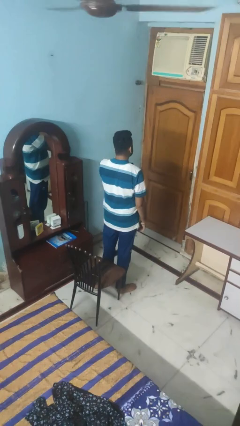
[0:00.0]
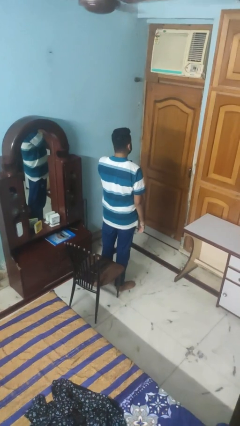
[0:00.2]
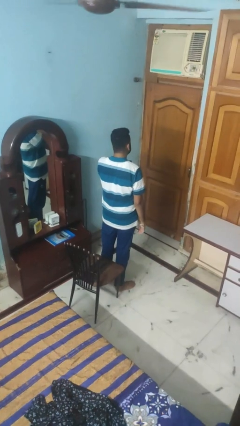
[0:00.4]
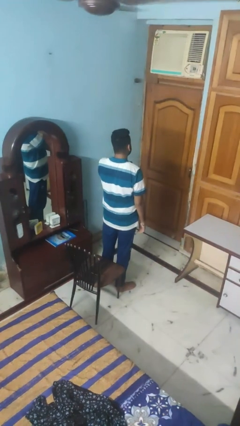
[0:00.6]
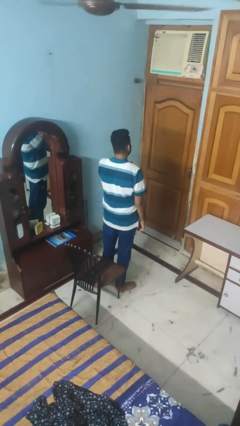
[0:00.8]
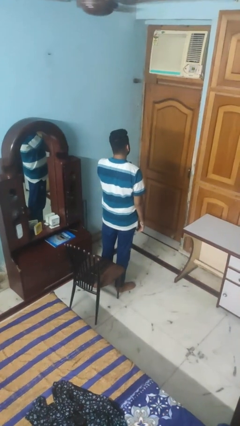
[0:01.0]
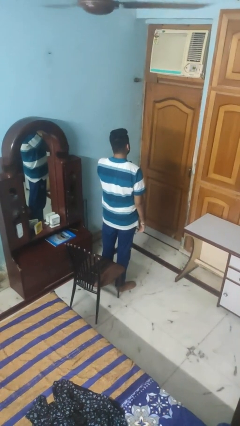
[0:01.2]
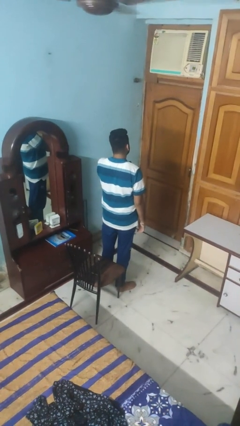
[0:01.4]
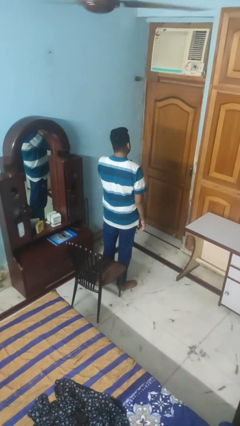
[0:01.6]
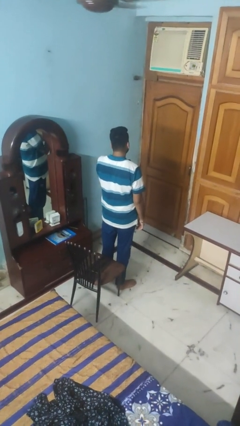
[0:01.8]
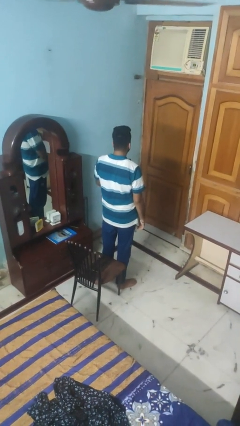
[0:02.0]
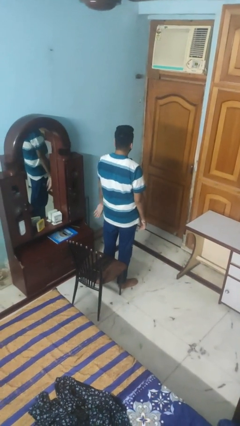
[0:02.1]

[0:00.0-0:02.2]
person rubs eyes

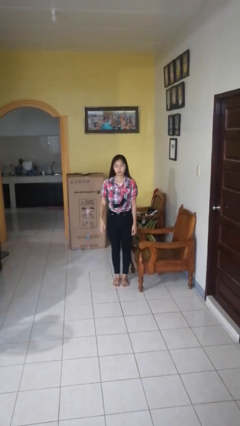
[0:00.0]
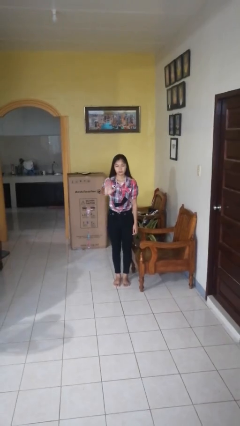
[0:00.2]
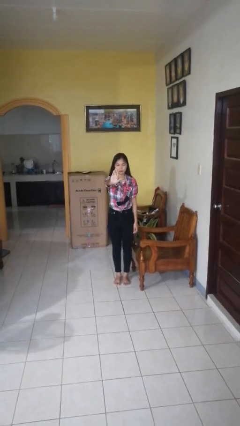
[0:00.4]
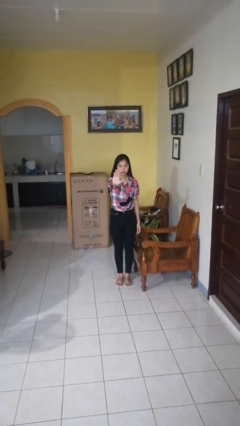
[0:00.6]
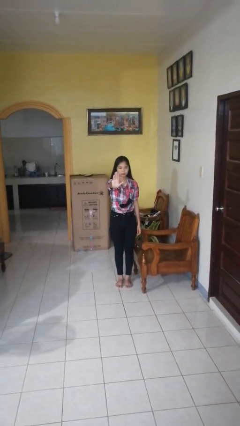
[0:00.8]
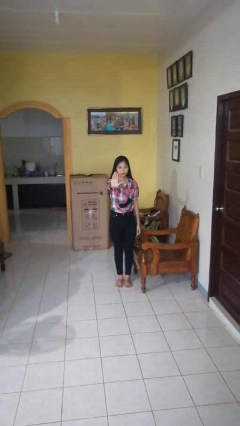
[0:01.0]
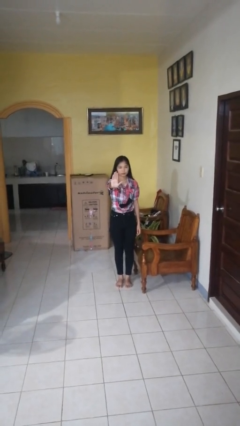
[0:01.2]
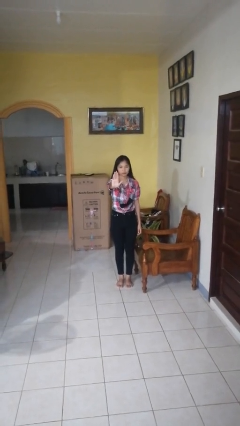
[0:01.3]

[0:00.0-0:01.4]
person gestures stop

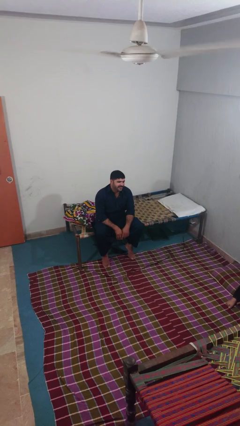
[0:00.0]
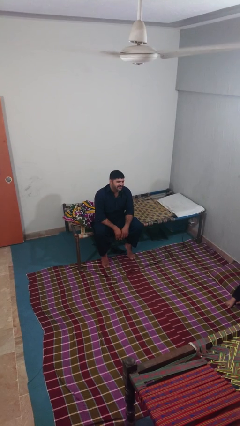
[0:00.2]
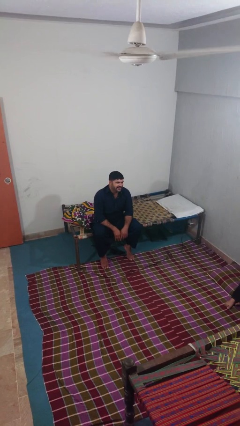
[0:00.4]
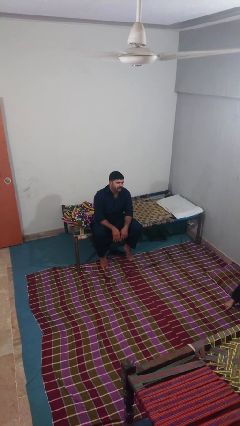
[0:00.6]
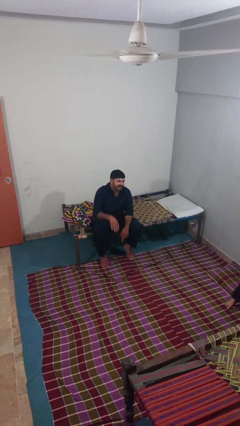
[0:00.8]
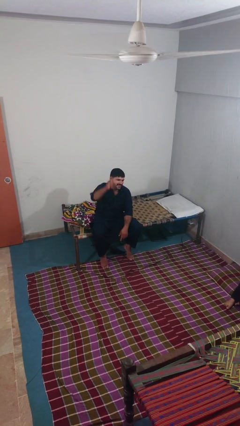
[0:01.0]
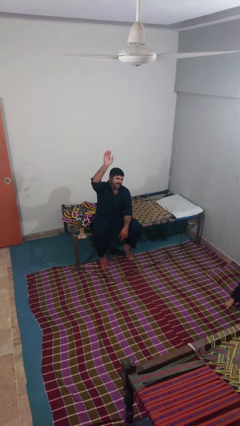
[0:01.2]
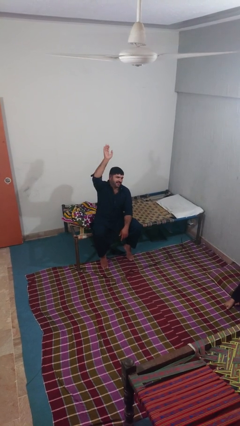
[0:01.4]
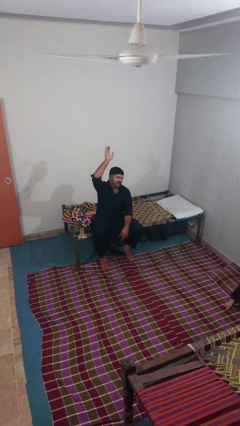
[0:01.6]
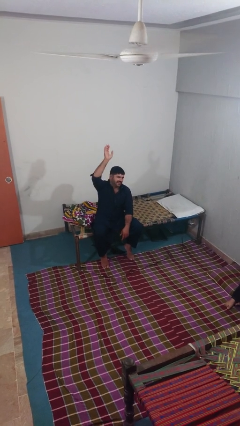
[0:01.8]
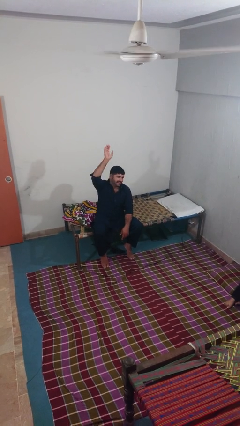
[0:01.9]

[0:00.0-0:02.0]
person gestures raise hand

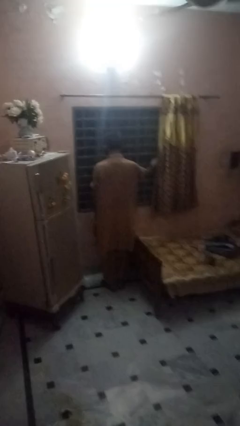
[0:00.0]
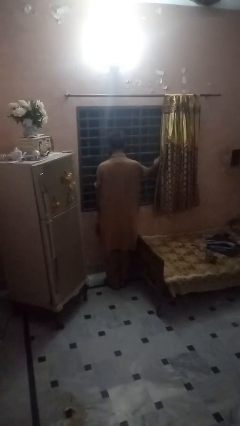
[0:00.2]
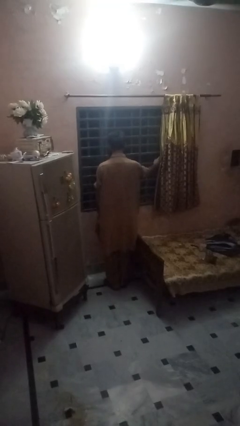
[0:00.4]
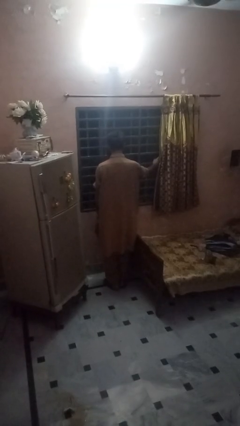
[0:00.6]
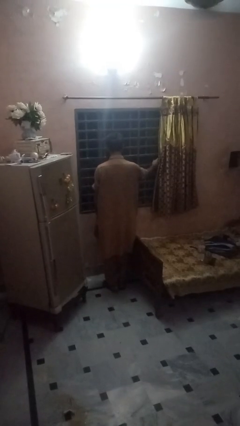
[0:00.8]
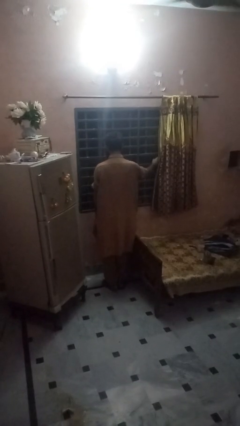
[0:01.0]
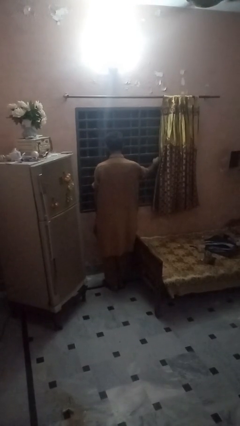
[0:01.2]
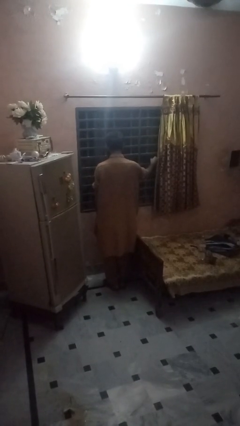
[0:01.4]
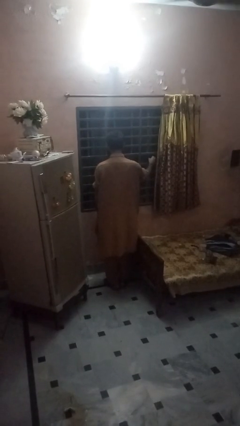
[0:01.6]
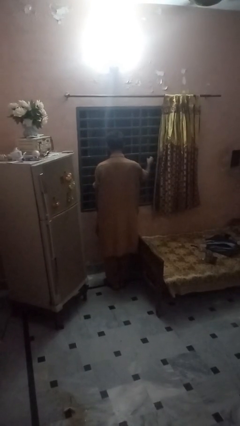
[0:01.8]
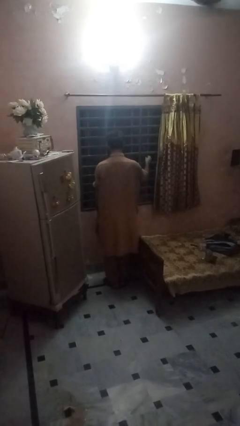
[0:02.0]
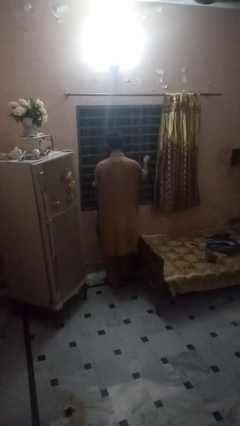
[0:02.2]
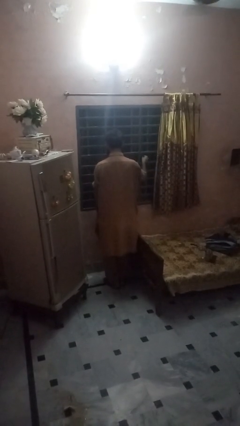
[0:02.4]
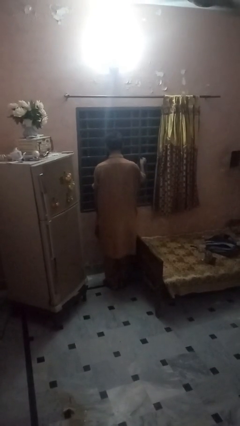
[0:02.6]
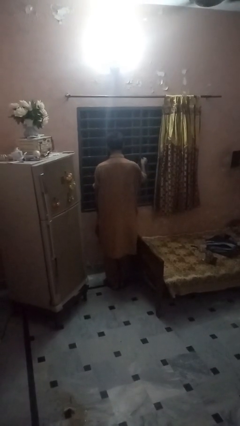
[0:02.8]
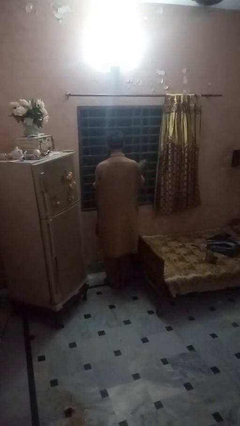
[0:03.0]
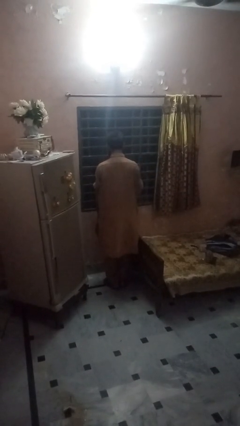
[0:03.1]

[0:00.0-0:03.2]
person closes home window

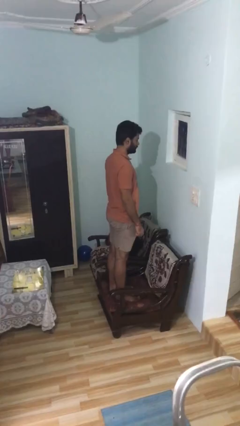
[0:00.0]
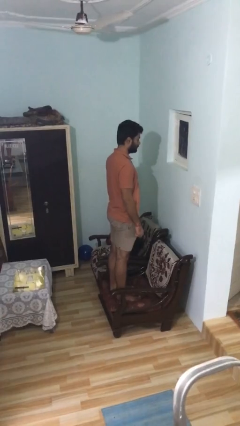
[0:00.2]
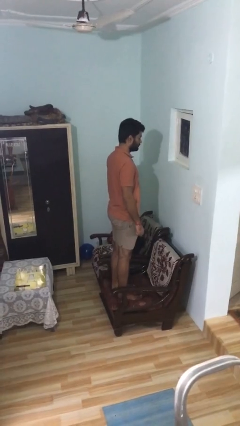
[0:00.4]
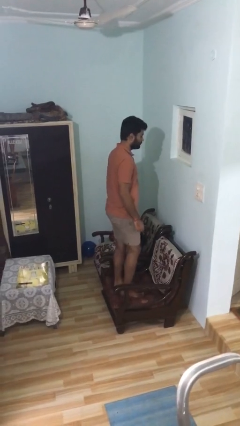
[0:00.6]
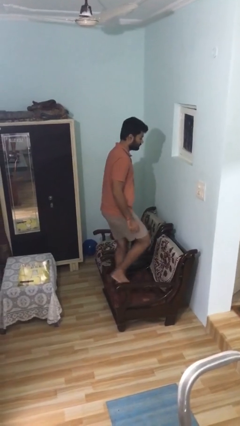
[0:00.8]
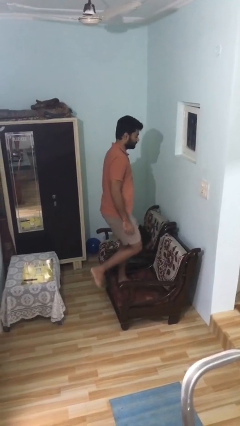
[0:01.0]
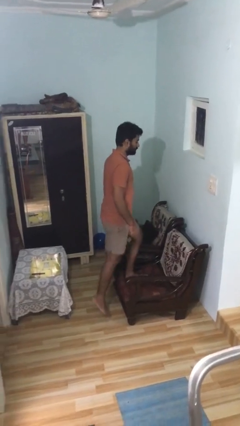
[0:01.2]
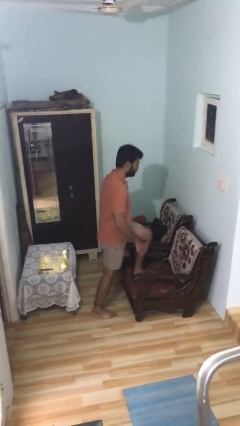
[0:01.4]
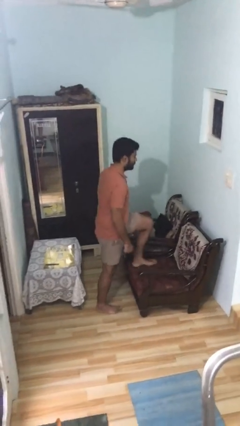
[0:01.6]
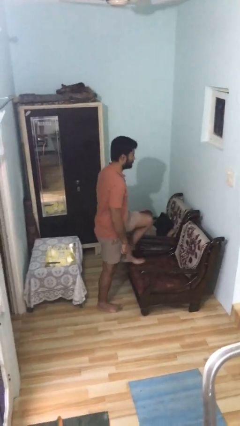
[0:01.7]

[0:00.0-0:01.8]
person climbs off couch

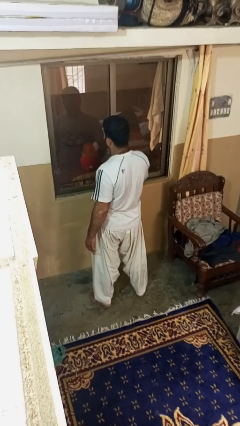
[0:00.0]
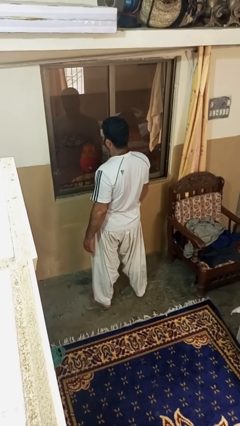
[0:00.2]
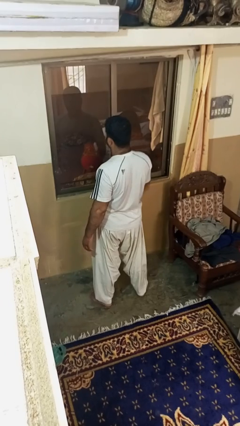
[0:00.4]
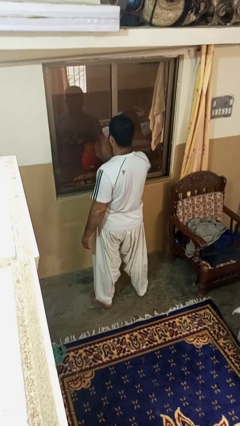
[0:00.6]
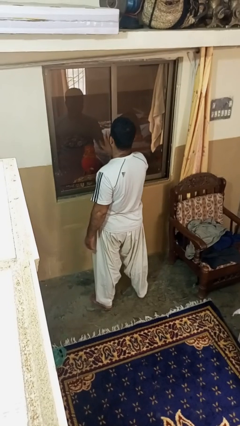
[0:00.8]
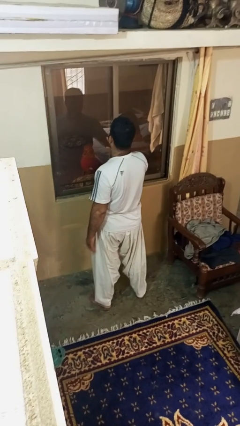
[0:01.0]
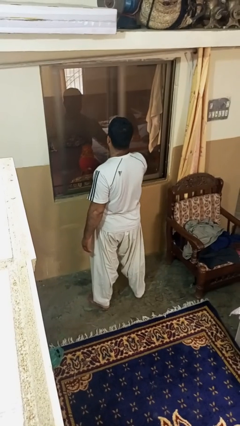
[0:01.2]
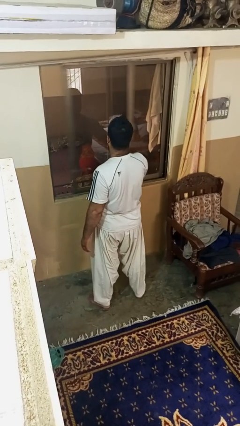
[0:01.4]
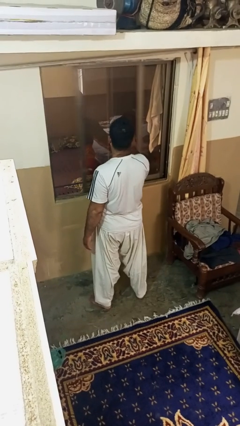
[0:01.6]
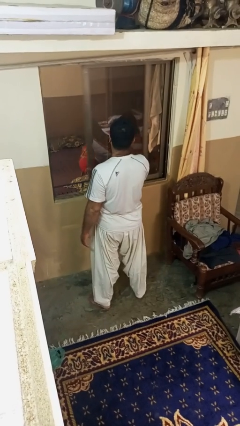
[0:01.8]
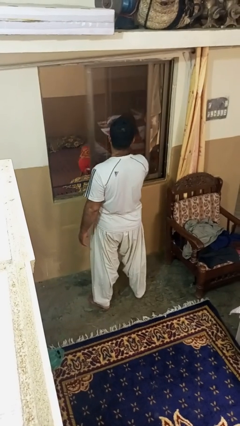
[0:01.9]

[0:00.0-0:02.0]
person opens home window

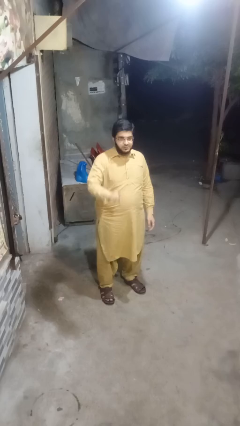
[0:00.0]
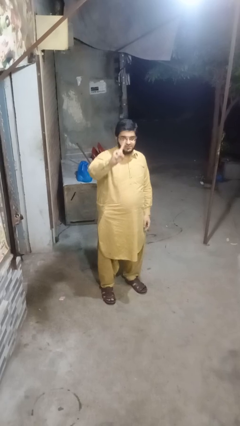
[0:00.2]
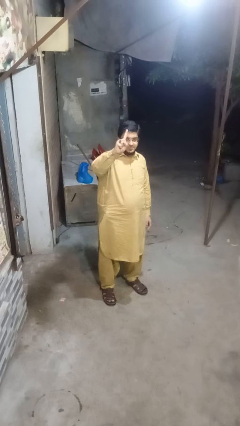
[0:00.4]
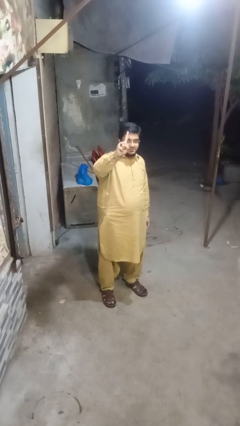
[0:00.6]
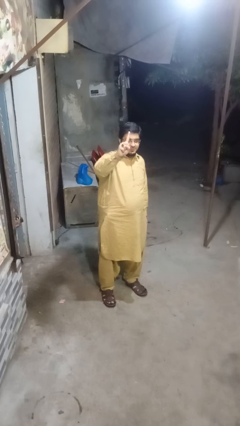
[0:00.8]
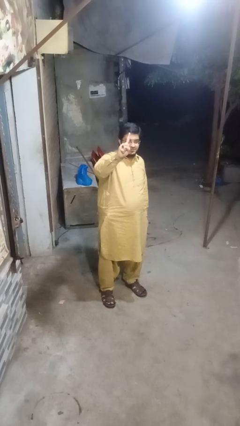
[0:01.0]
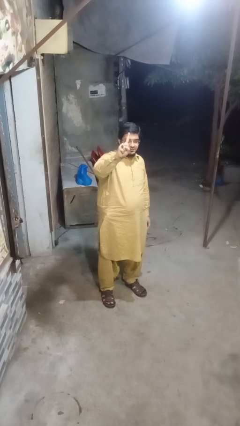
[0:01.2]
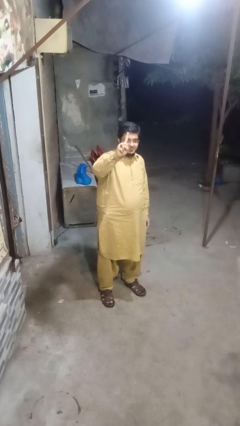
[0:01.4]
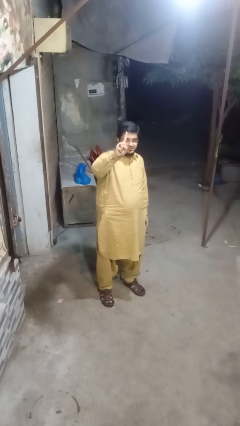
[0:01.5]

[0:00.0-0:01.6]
person gestures number one

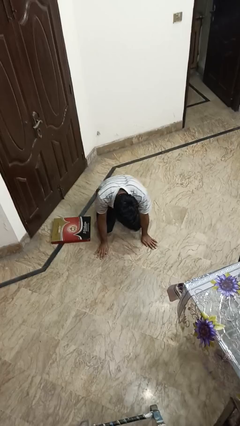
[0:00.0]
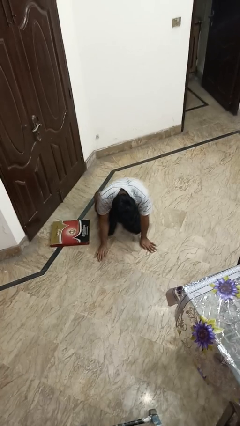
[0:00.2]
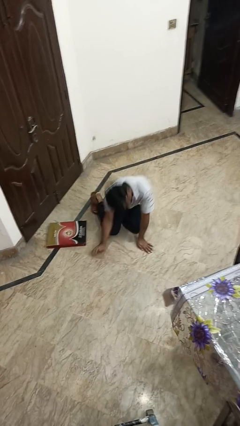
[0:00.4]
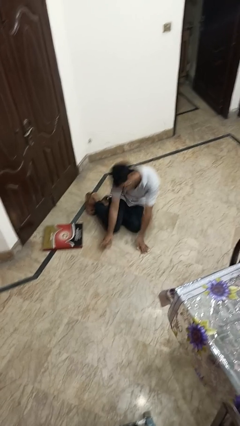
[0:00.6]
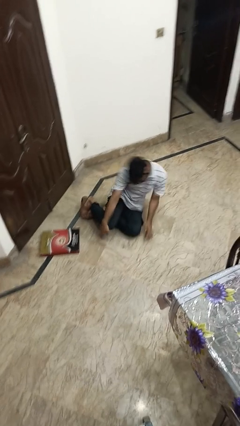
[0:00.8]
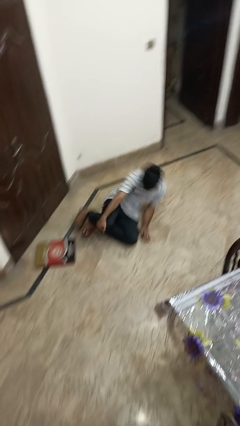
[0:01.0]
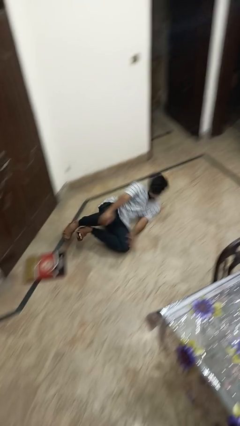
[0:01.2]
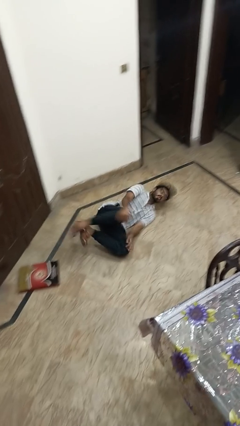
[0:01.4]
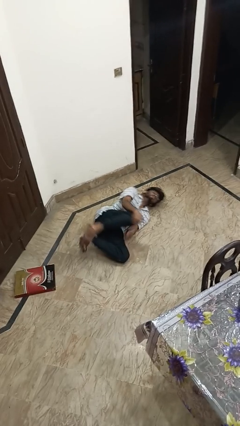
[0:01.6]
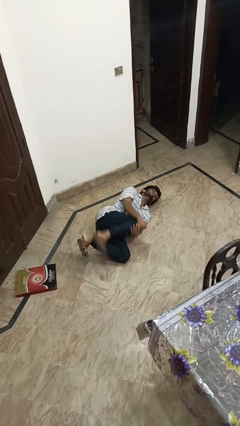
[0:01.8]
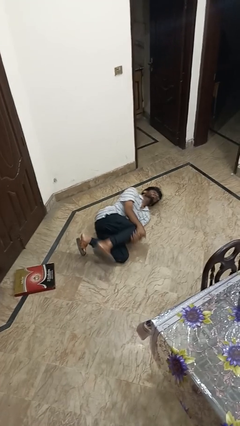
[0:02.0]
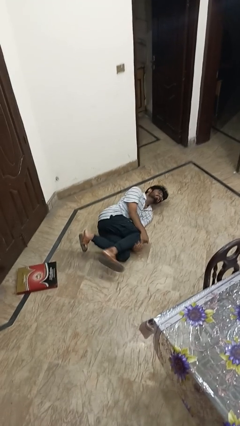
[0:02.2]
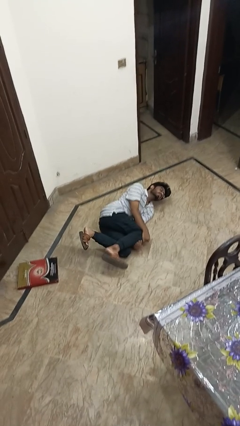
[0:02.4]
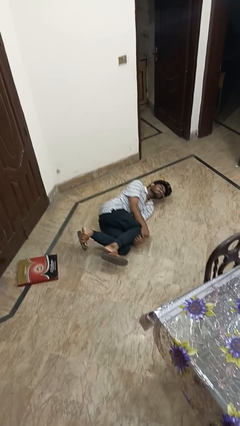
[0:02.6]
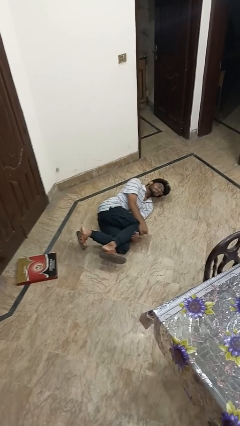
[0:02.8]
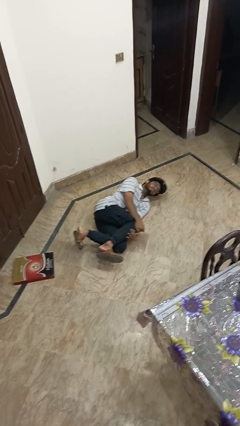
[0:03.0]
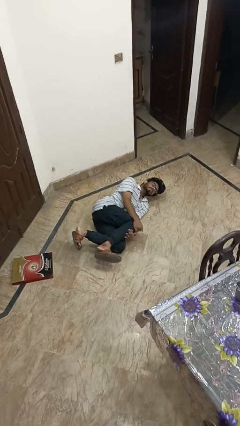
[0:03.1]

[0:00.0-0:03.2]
person lies down on floor
